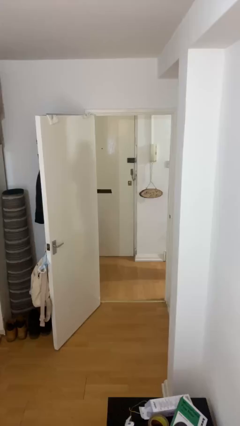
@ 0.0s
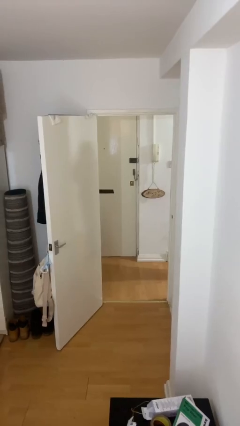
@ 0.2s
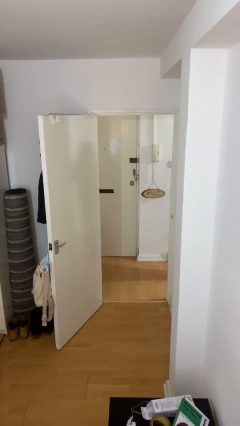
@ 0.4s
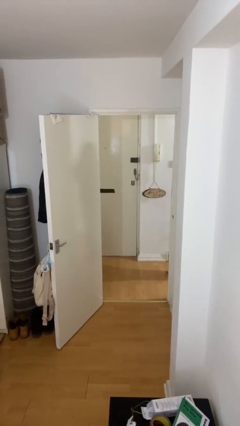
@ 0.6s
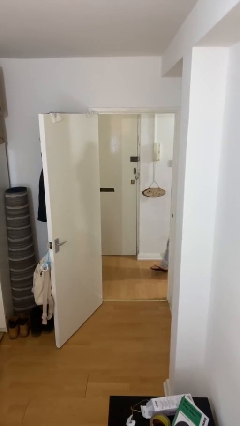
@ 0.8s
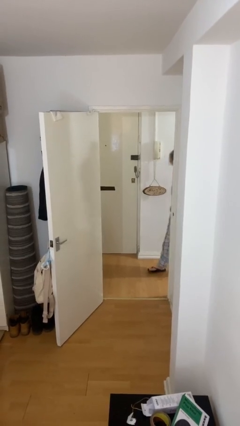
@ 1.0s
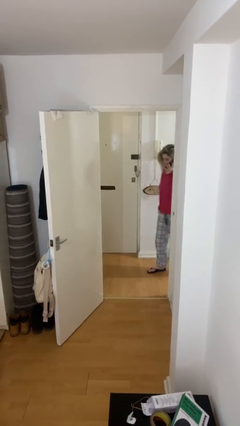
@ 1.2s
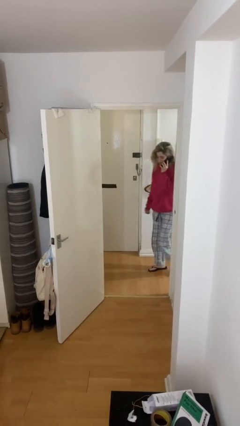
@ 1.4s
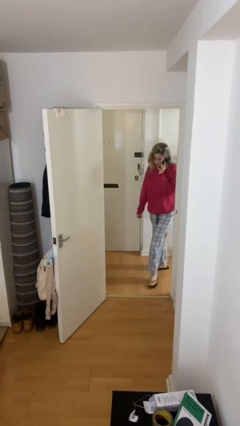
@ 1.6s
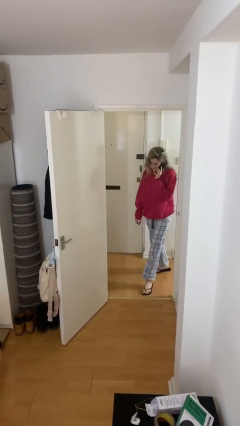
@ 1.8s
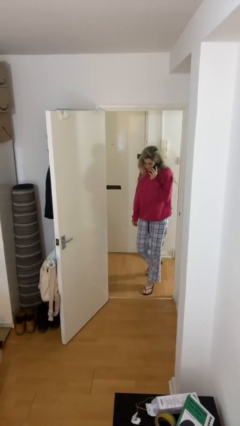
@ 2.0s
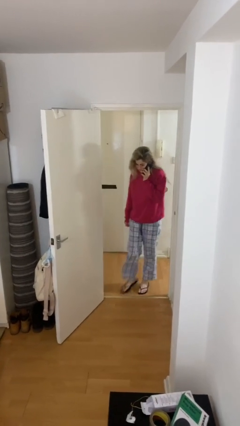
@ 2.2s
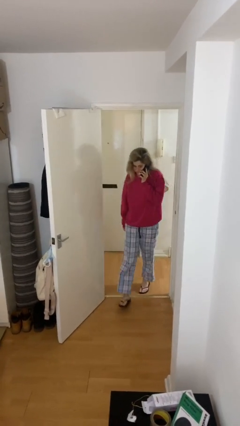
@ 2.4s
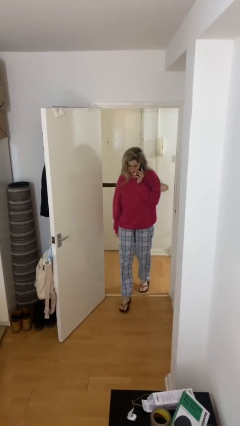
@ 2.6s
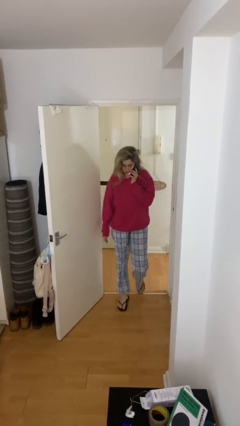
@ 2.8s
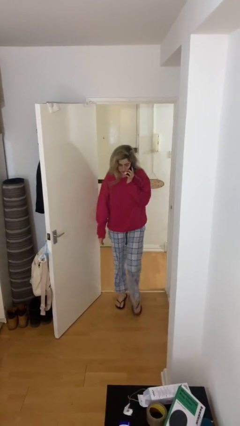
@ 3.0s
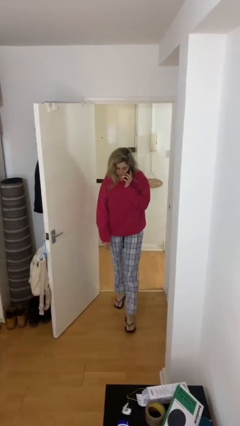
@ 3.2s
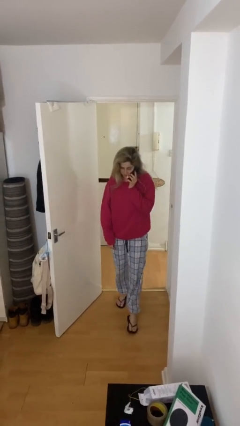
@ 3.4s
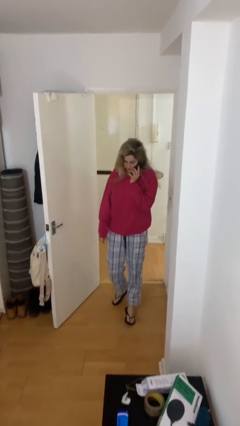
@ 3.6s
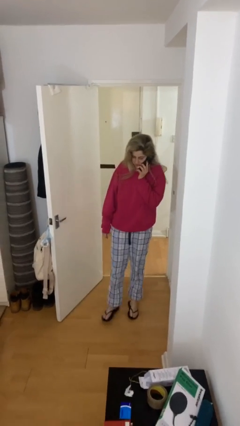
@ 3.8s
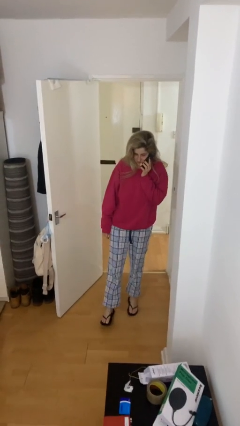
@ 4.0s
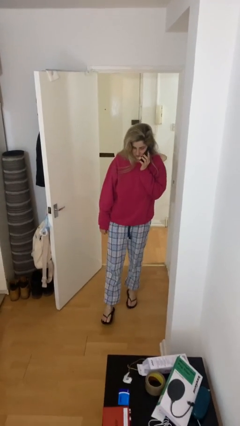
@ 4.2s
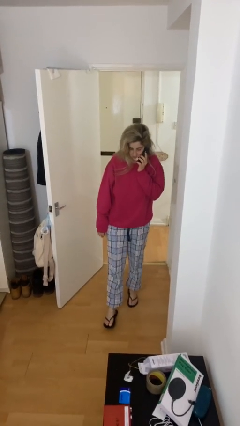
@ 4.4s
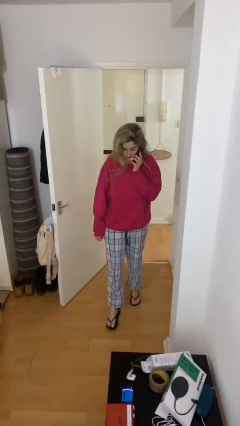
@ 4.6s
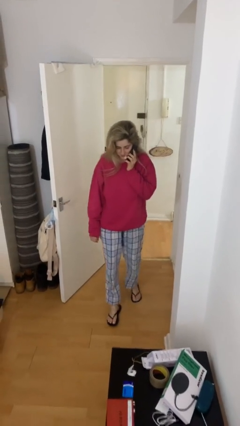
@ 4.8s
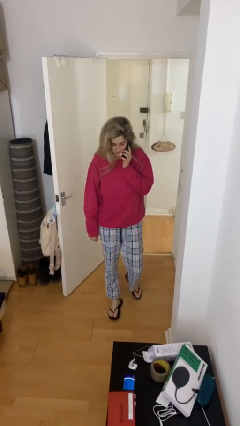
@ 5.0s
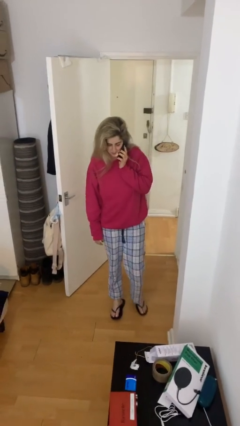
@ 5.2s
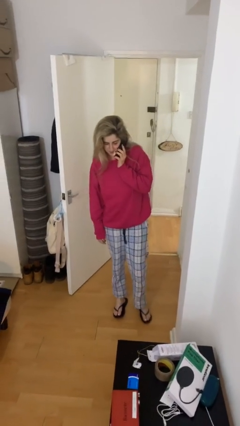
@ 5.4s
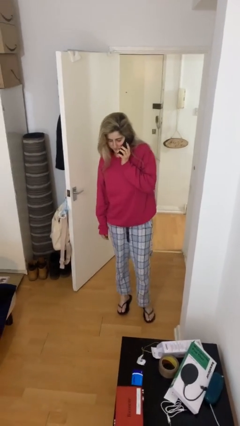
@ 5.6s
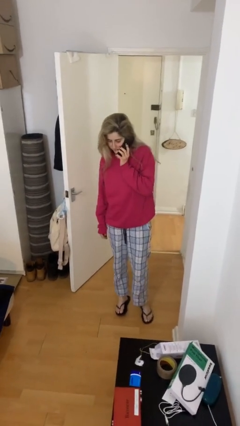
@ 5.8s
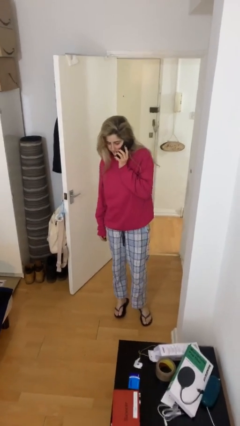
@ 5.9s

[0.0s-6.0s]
person enters scene through structure

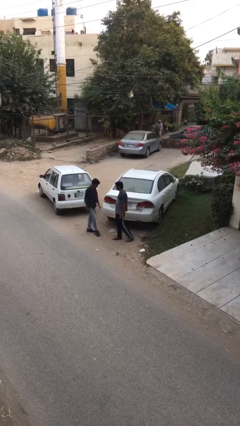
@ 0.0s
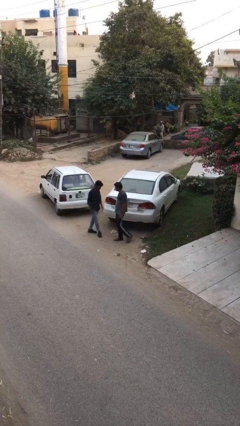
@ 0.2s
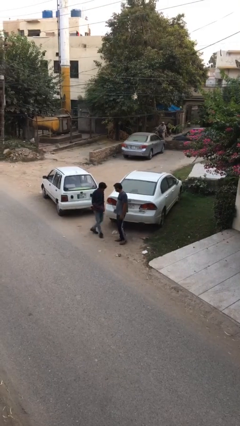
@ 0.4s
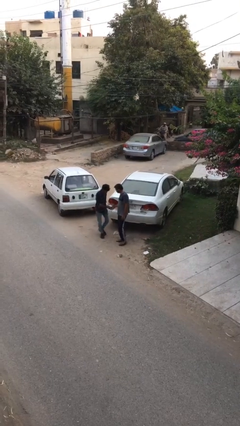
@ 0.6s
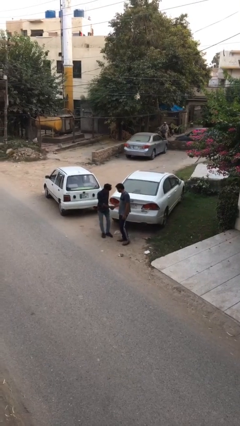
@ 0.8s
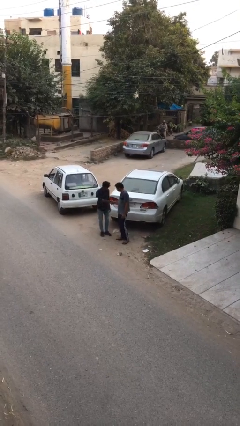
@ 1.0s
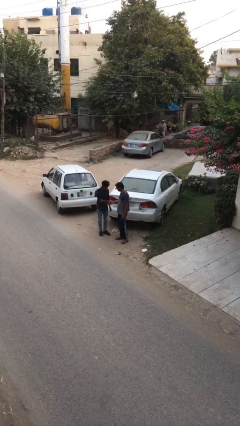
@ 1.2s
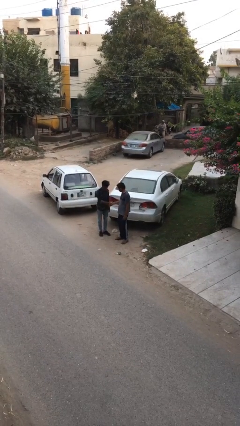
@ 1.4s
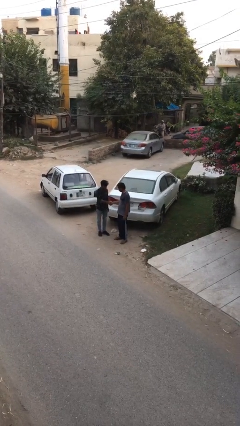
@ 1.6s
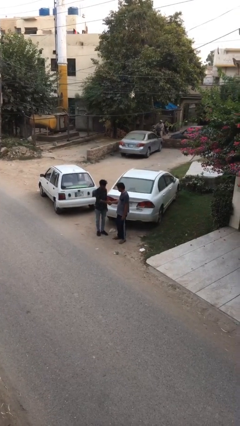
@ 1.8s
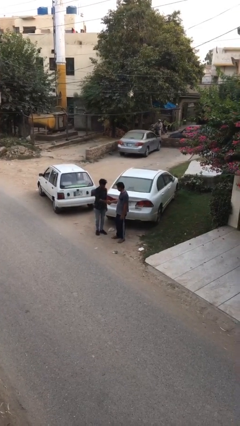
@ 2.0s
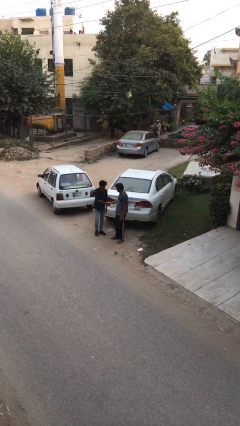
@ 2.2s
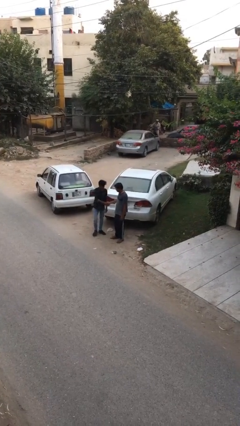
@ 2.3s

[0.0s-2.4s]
person shakes hand

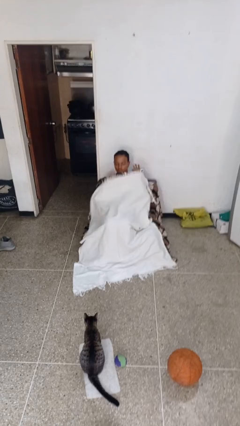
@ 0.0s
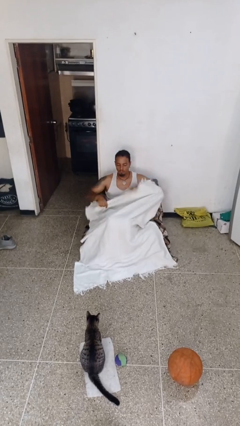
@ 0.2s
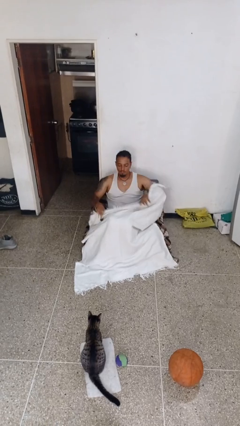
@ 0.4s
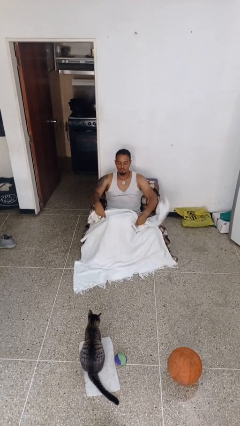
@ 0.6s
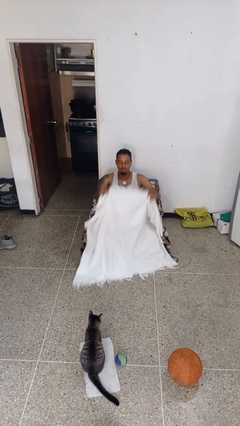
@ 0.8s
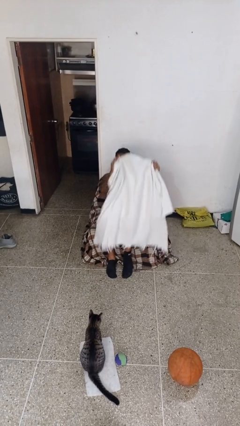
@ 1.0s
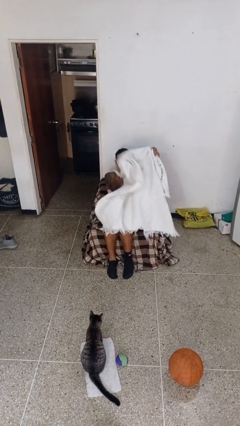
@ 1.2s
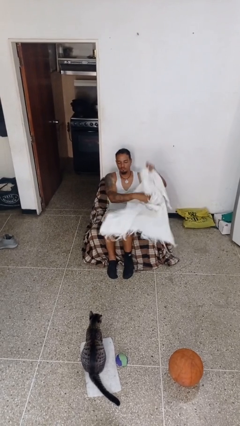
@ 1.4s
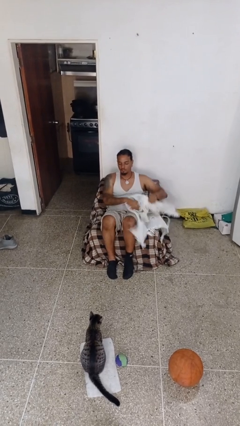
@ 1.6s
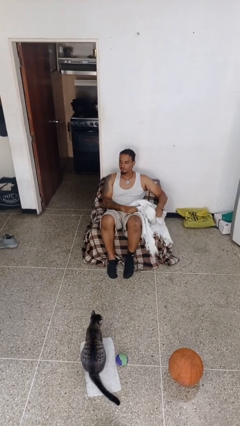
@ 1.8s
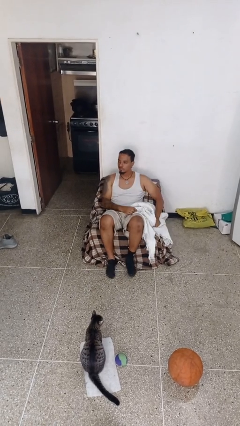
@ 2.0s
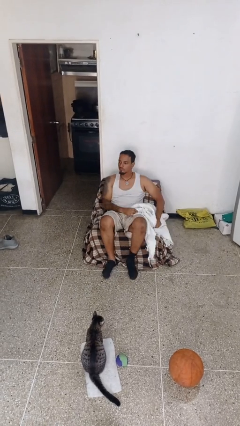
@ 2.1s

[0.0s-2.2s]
person uncovers with blanket

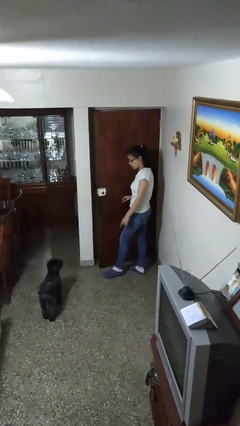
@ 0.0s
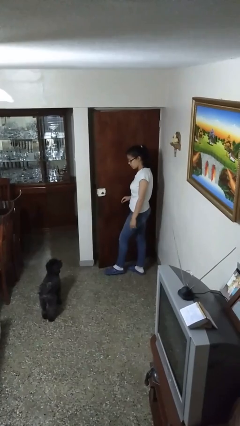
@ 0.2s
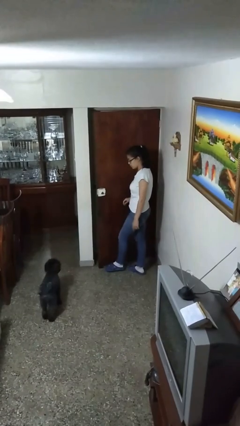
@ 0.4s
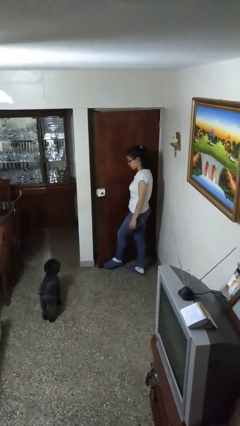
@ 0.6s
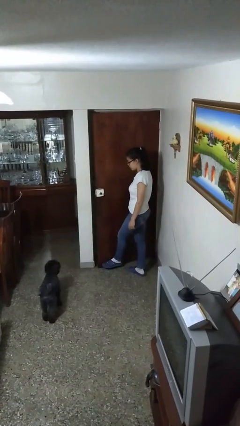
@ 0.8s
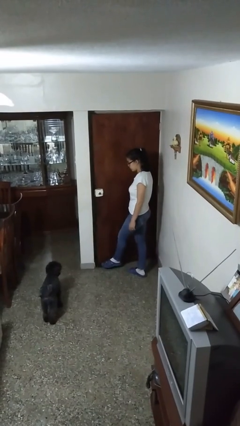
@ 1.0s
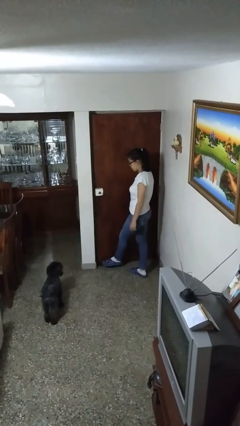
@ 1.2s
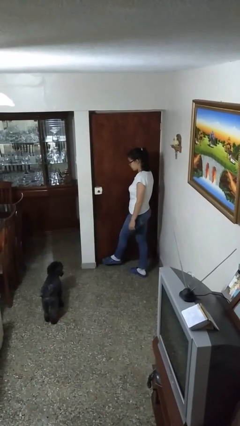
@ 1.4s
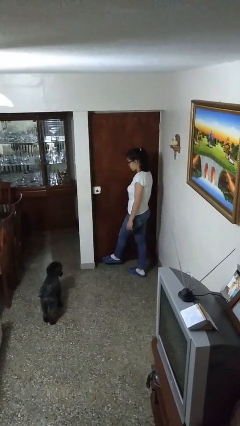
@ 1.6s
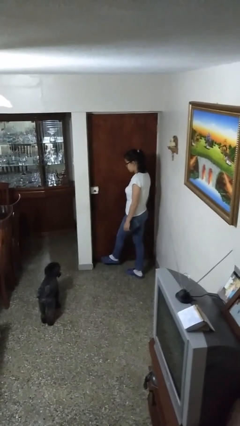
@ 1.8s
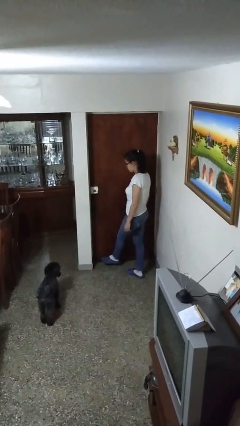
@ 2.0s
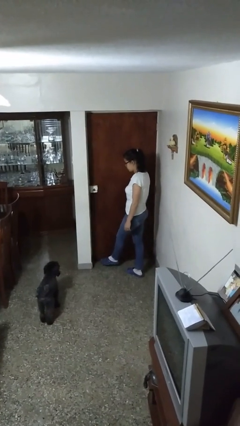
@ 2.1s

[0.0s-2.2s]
person closes door with foot

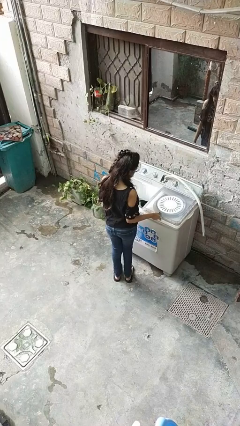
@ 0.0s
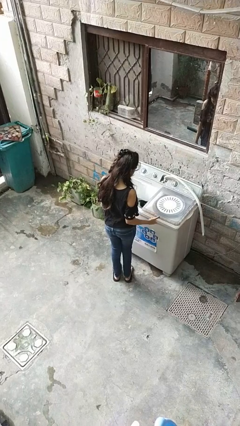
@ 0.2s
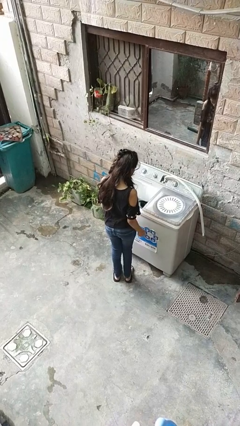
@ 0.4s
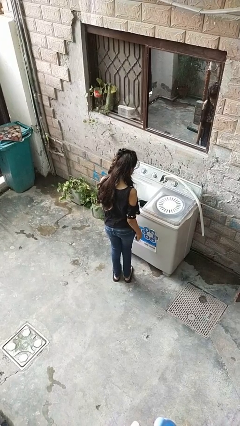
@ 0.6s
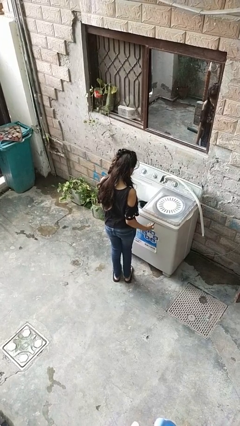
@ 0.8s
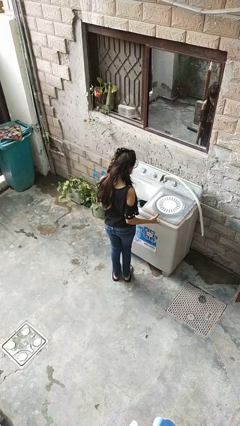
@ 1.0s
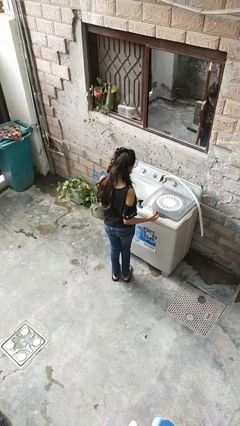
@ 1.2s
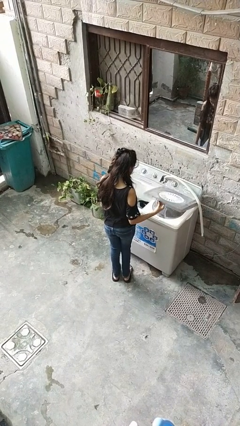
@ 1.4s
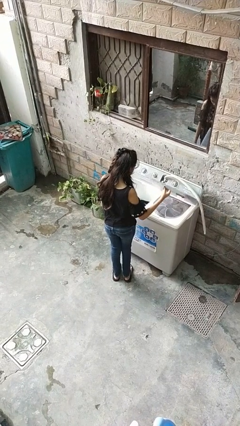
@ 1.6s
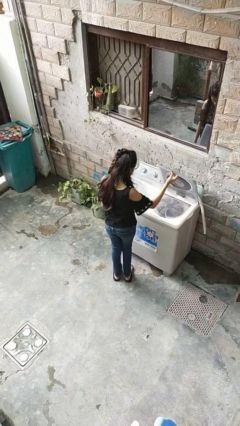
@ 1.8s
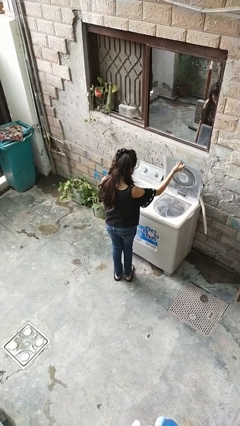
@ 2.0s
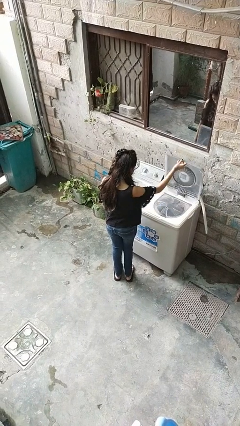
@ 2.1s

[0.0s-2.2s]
person opens clothes washer

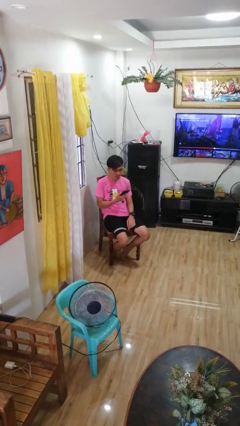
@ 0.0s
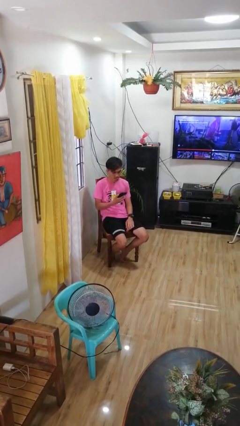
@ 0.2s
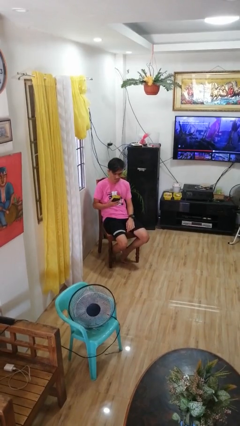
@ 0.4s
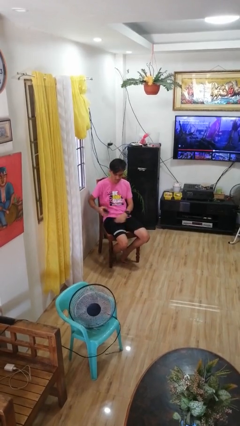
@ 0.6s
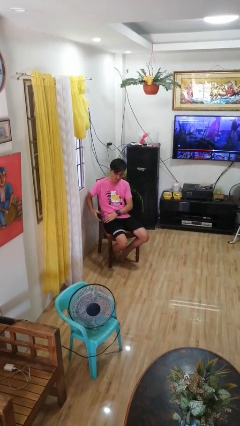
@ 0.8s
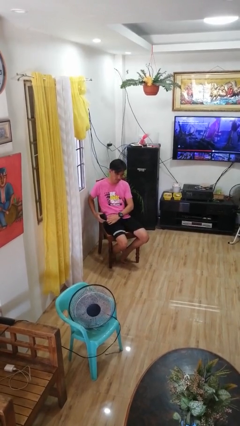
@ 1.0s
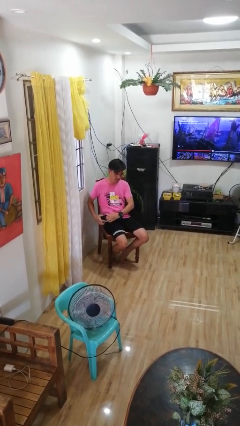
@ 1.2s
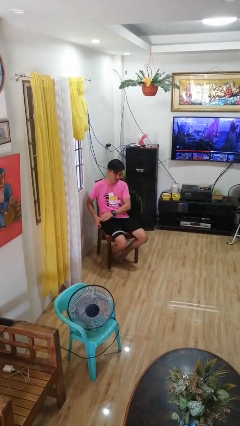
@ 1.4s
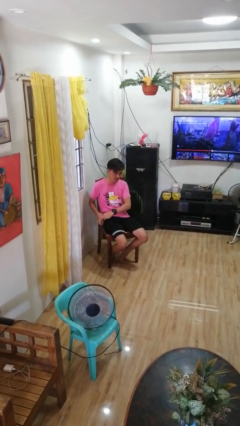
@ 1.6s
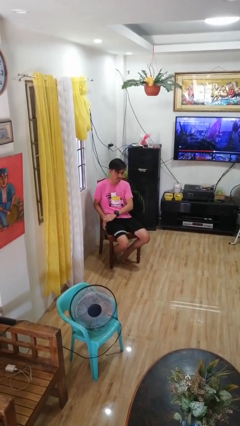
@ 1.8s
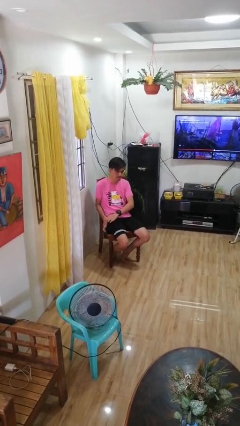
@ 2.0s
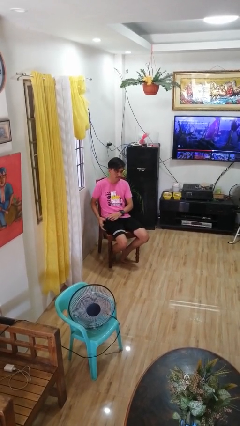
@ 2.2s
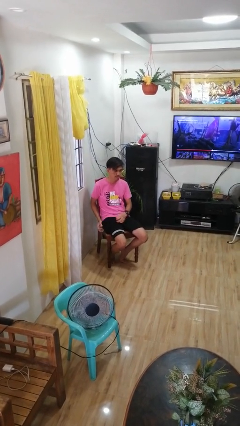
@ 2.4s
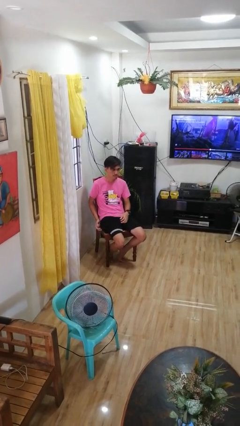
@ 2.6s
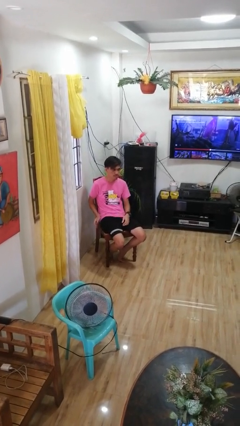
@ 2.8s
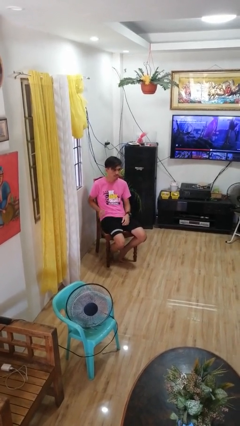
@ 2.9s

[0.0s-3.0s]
person puts phone into pocket
